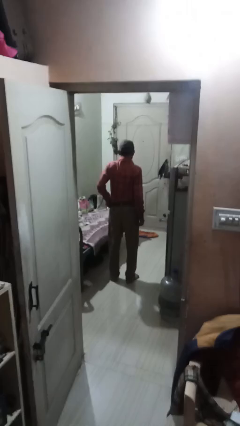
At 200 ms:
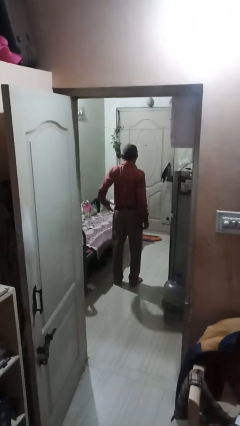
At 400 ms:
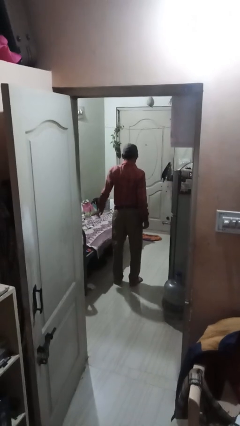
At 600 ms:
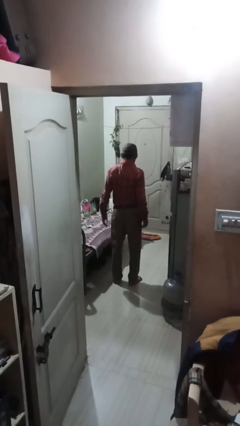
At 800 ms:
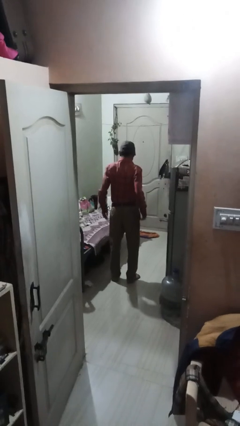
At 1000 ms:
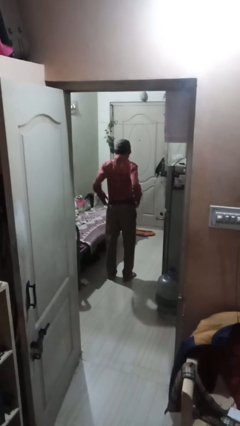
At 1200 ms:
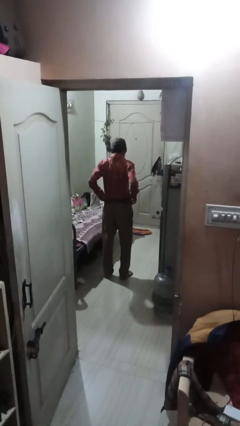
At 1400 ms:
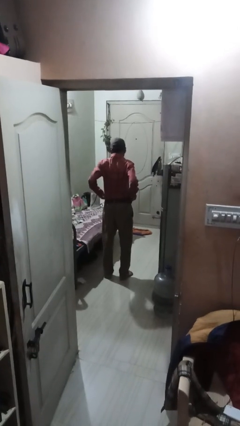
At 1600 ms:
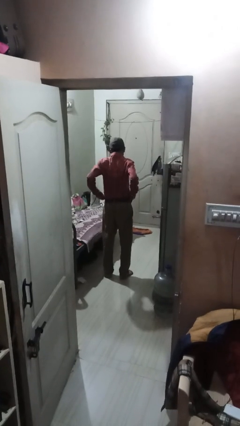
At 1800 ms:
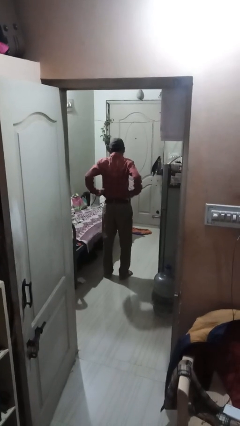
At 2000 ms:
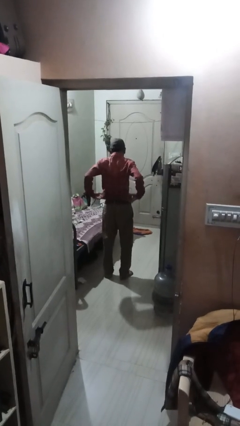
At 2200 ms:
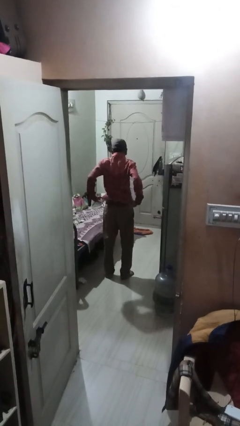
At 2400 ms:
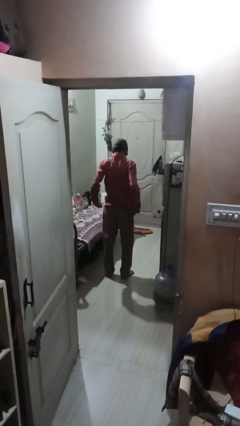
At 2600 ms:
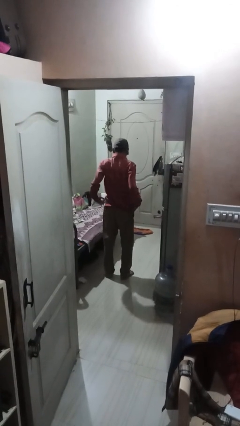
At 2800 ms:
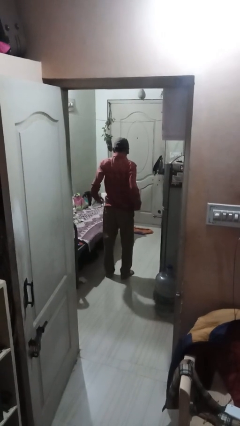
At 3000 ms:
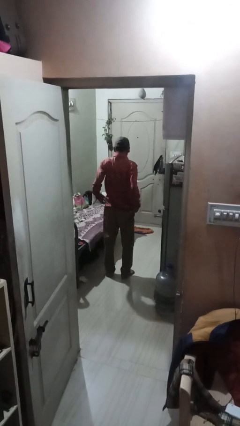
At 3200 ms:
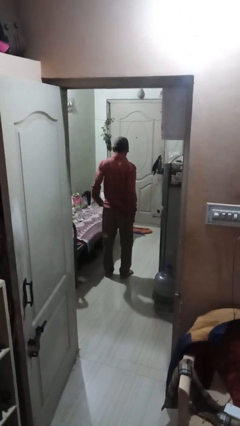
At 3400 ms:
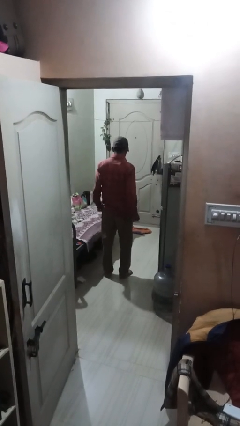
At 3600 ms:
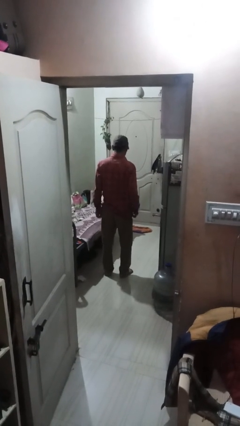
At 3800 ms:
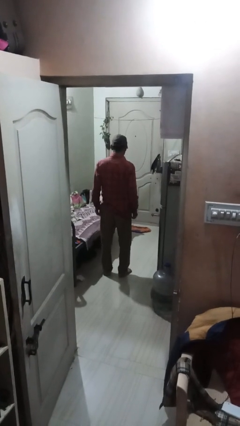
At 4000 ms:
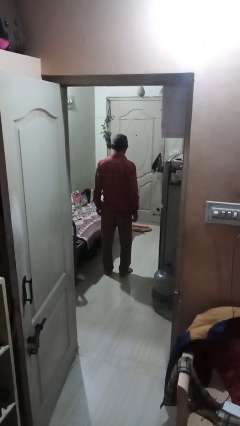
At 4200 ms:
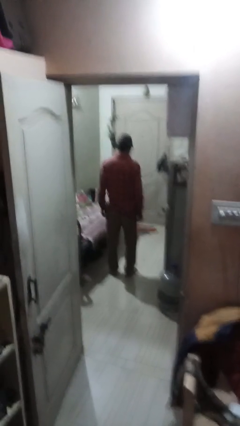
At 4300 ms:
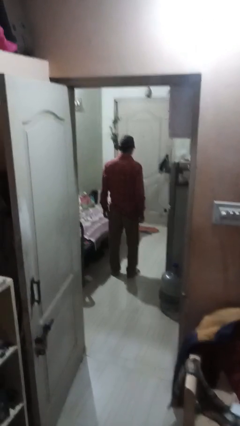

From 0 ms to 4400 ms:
person untucks shirt

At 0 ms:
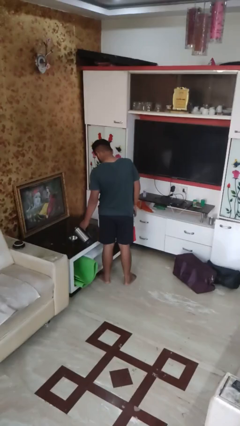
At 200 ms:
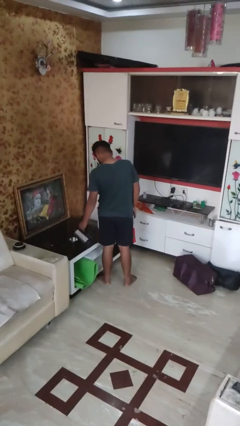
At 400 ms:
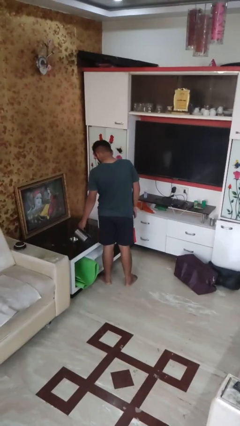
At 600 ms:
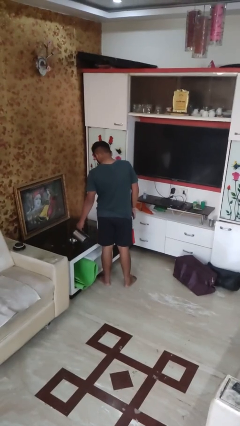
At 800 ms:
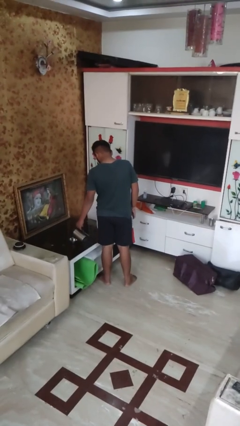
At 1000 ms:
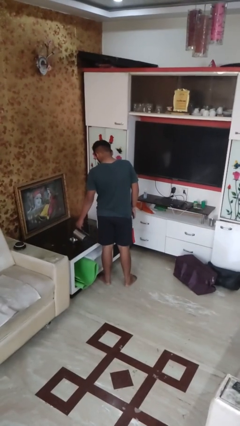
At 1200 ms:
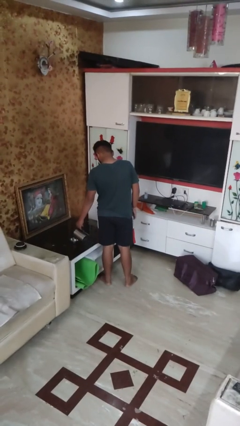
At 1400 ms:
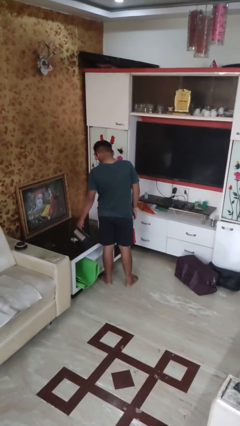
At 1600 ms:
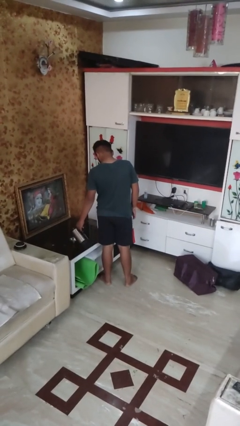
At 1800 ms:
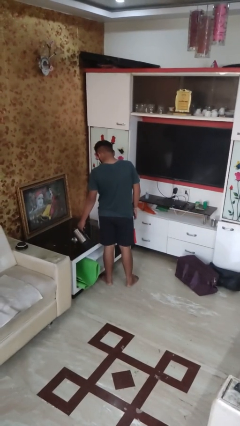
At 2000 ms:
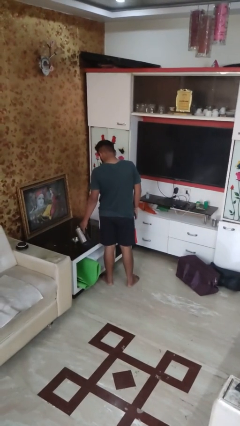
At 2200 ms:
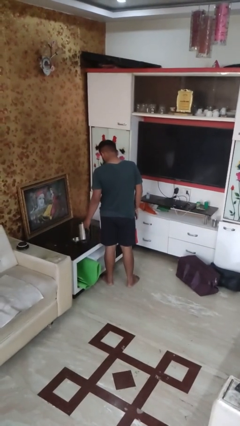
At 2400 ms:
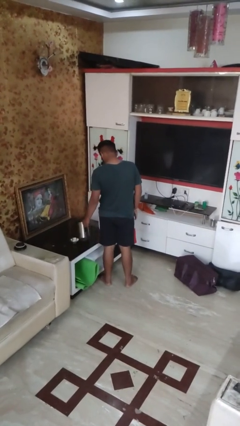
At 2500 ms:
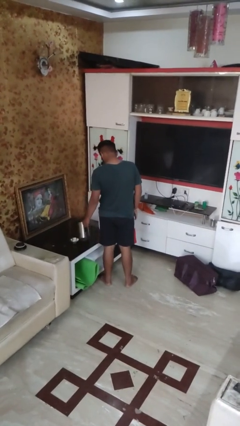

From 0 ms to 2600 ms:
person pours into bowl

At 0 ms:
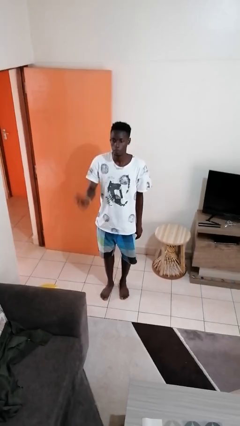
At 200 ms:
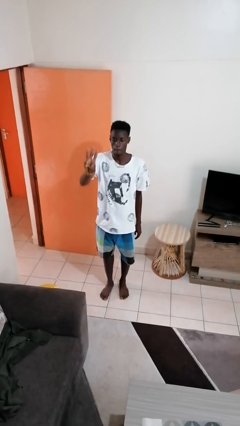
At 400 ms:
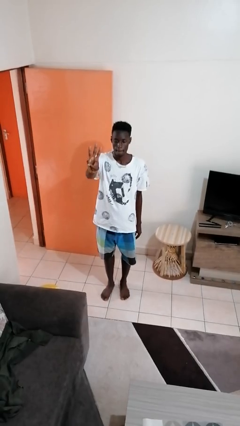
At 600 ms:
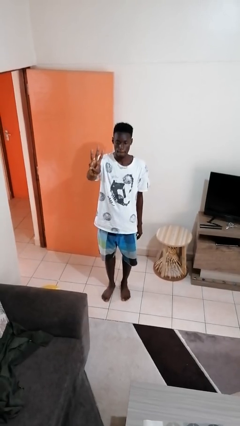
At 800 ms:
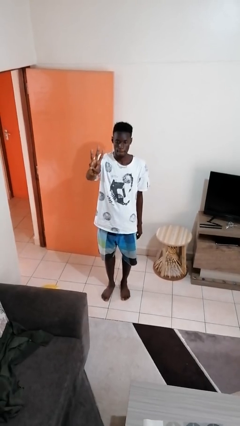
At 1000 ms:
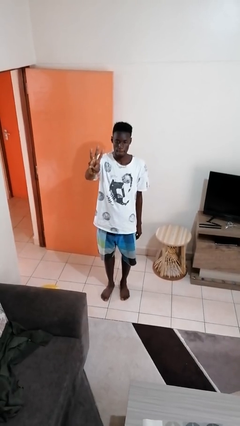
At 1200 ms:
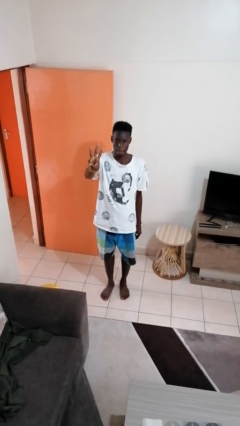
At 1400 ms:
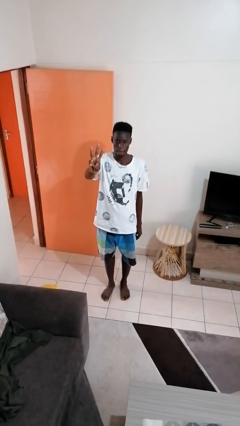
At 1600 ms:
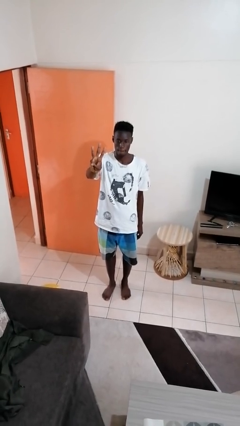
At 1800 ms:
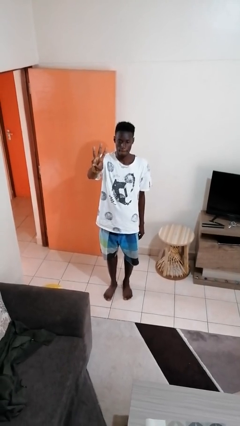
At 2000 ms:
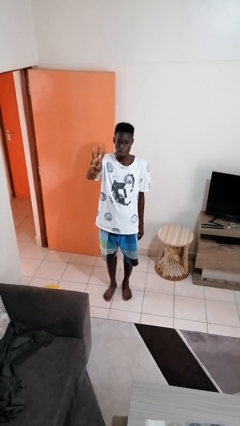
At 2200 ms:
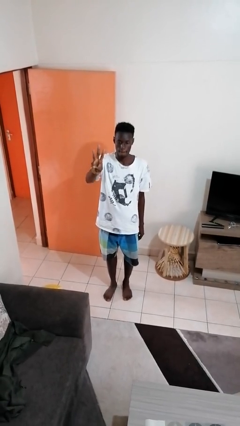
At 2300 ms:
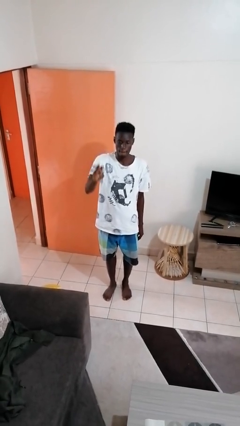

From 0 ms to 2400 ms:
person gestures number three

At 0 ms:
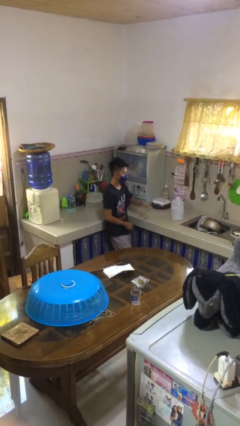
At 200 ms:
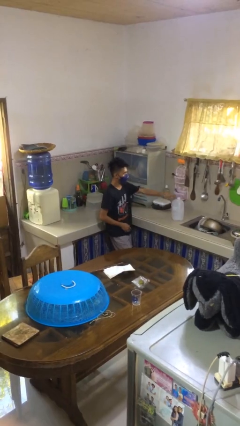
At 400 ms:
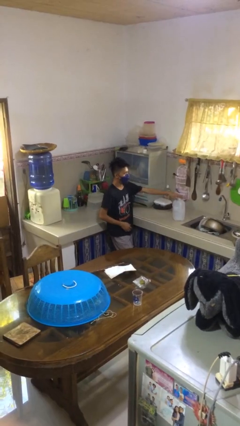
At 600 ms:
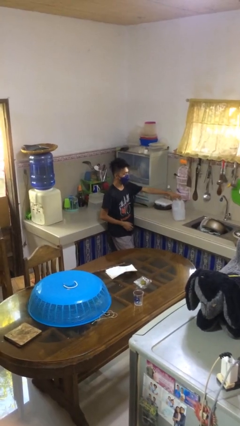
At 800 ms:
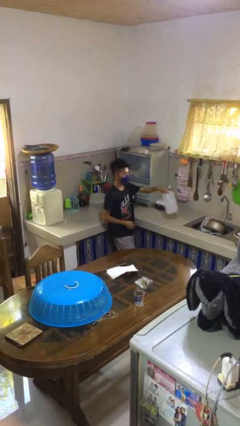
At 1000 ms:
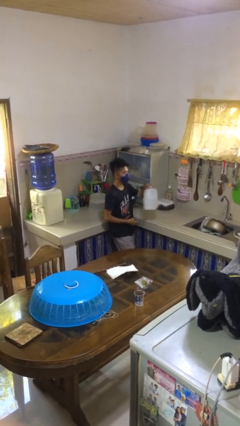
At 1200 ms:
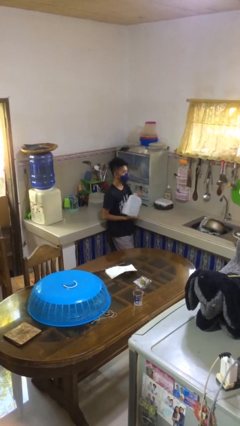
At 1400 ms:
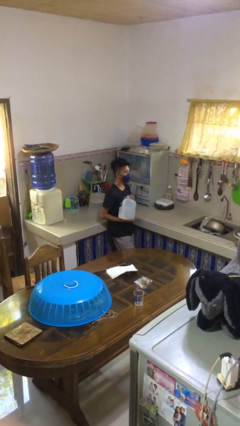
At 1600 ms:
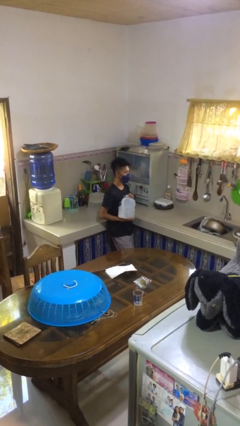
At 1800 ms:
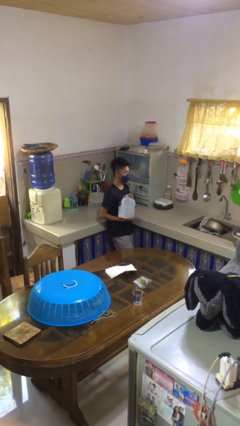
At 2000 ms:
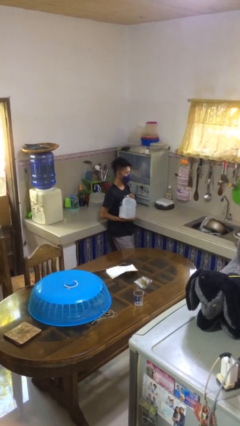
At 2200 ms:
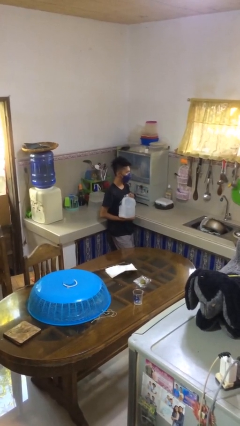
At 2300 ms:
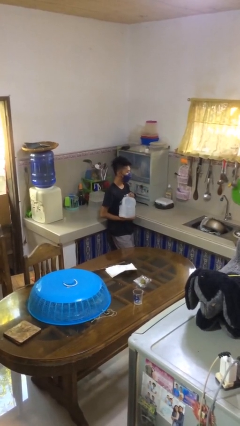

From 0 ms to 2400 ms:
person picks up object from countertop

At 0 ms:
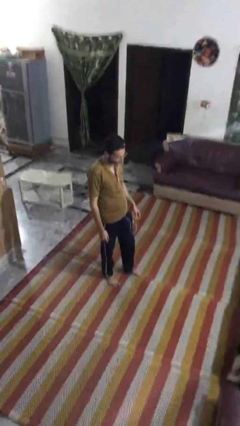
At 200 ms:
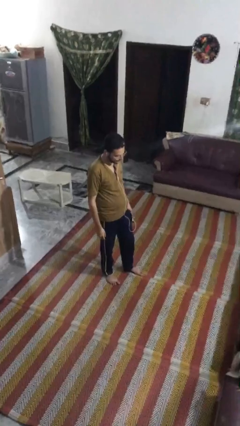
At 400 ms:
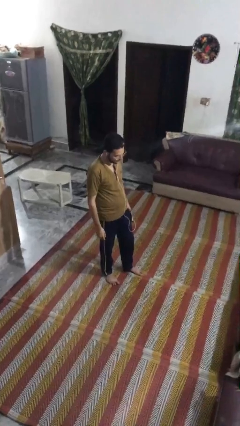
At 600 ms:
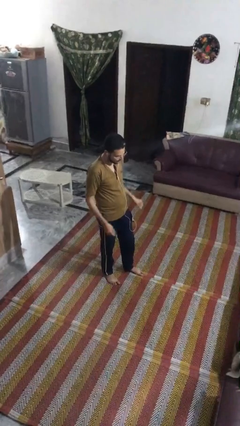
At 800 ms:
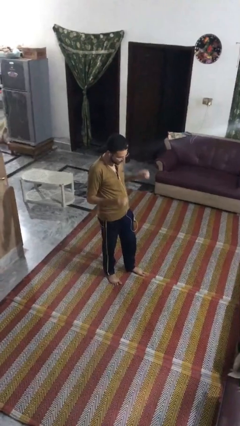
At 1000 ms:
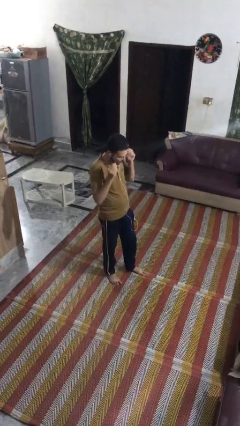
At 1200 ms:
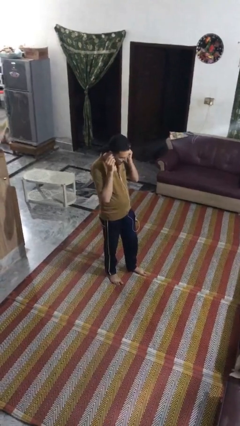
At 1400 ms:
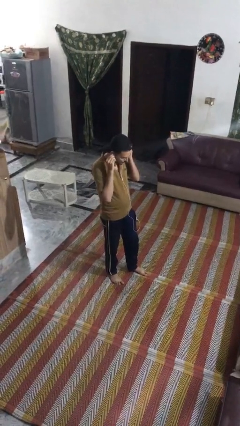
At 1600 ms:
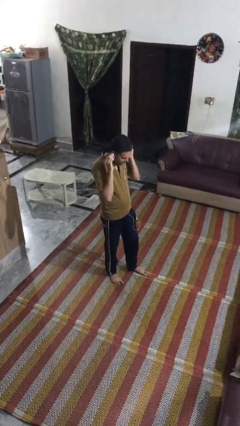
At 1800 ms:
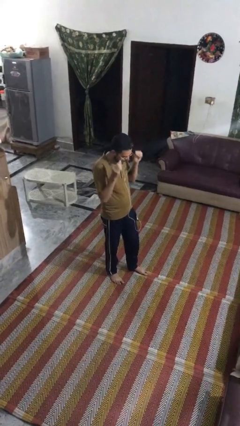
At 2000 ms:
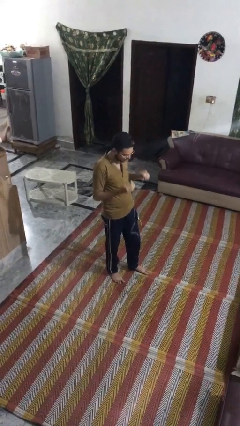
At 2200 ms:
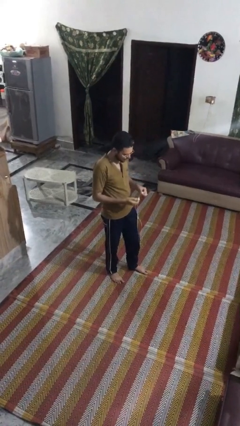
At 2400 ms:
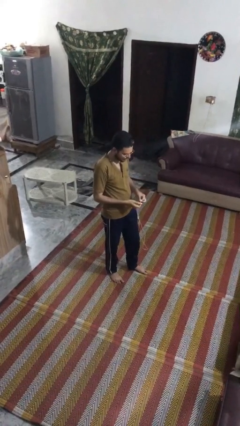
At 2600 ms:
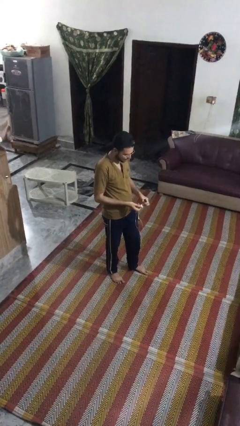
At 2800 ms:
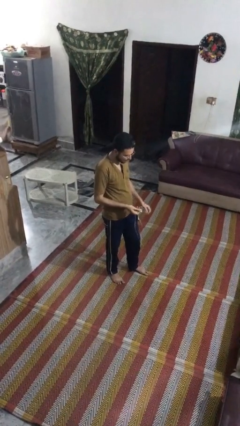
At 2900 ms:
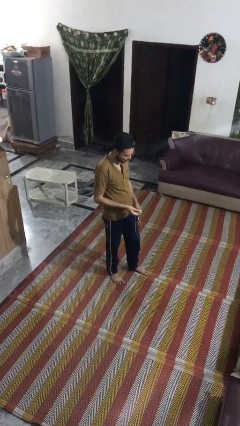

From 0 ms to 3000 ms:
person takes off headphones

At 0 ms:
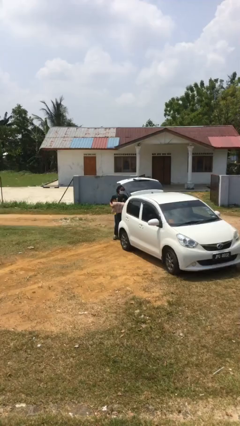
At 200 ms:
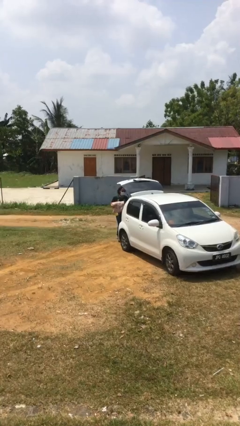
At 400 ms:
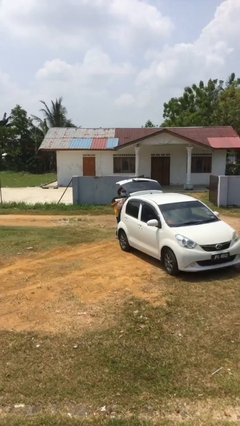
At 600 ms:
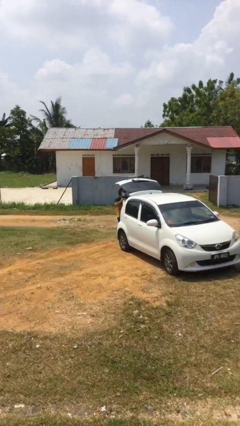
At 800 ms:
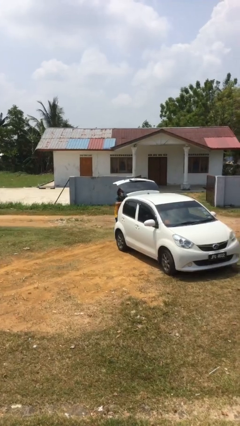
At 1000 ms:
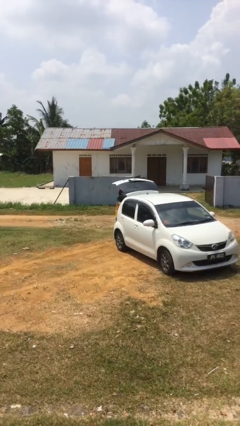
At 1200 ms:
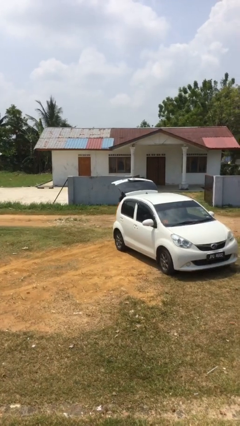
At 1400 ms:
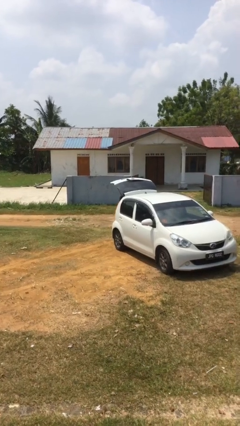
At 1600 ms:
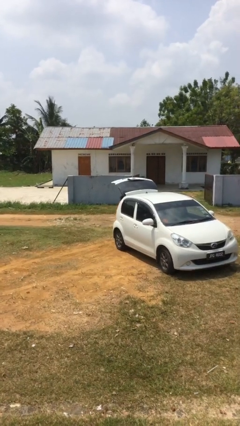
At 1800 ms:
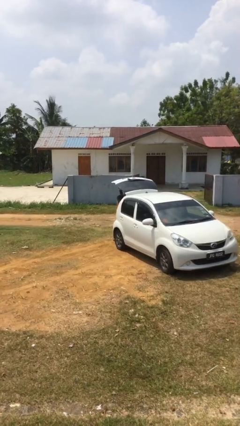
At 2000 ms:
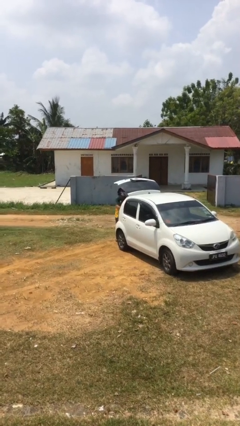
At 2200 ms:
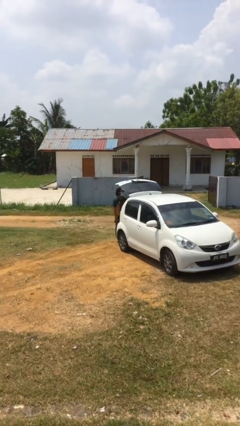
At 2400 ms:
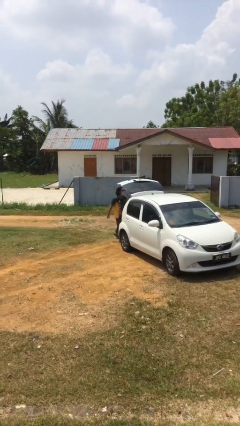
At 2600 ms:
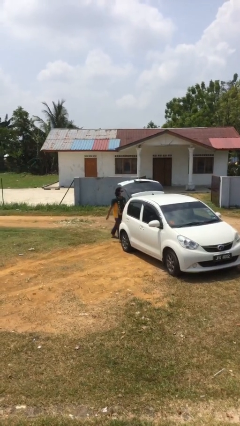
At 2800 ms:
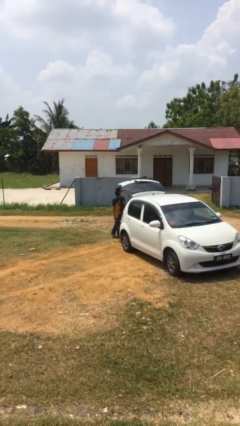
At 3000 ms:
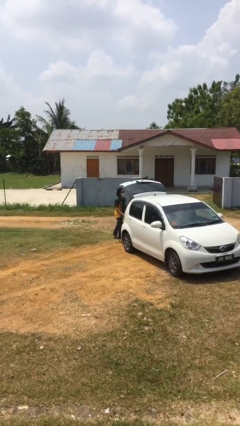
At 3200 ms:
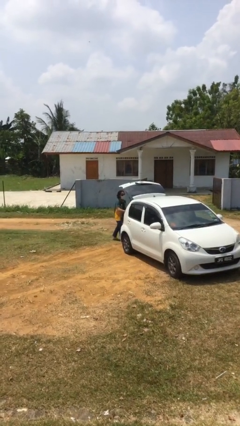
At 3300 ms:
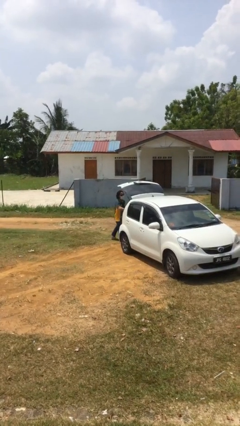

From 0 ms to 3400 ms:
person loads car
